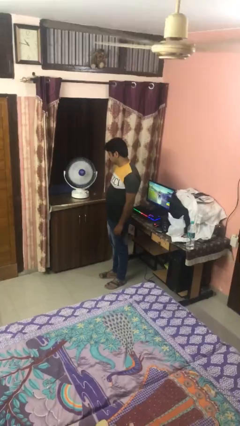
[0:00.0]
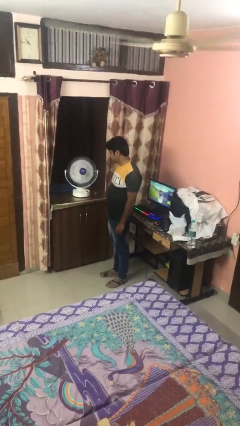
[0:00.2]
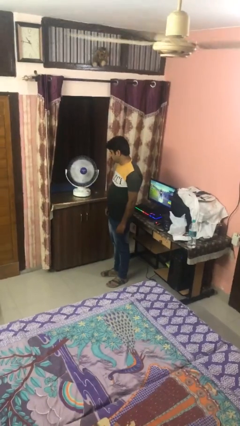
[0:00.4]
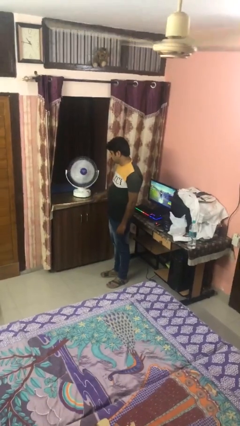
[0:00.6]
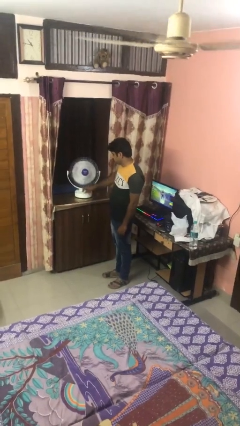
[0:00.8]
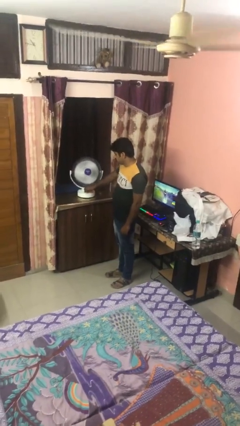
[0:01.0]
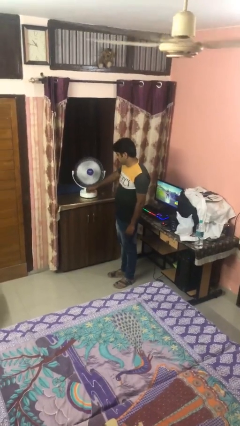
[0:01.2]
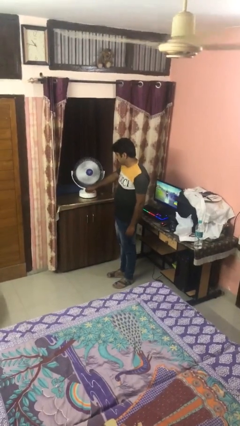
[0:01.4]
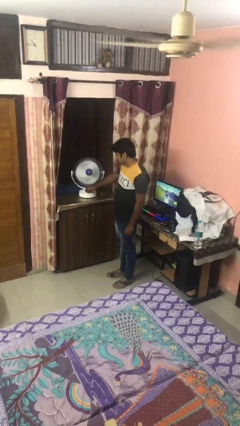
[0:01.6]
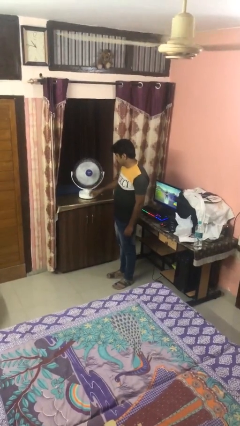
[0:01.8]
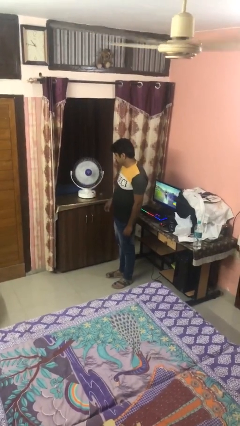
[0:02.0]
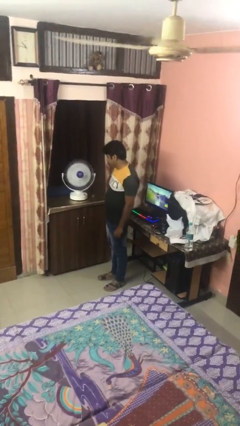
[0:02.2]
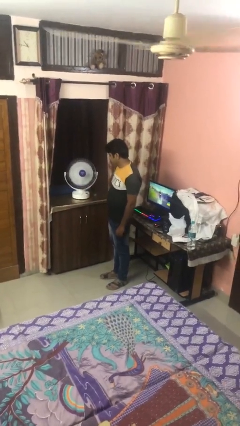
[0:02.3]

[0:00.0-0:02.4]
person turns on fan

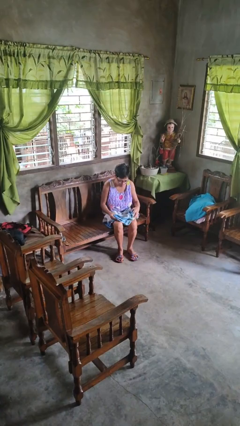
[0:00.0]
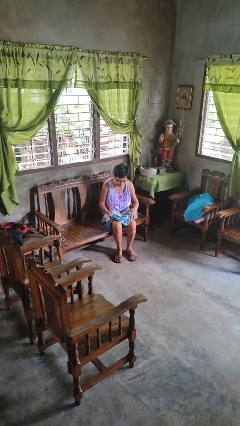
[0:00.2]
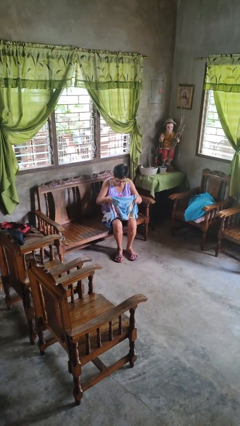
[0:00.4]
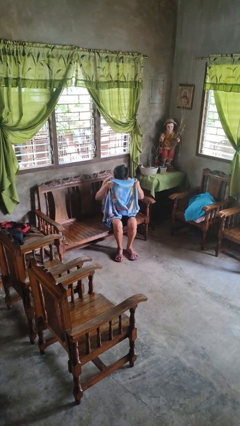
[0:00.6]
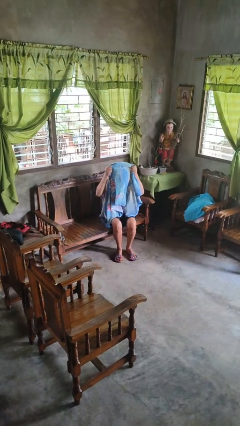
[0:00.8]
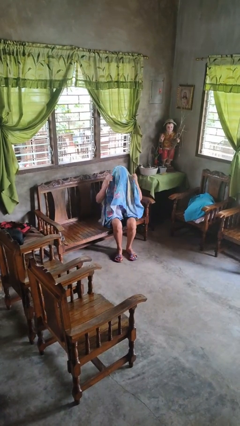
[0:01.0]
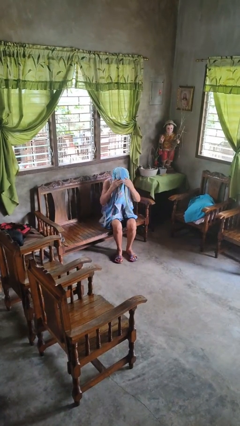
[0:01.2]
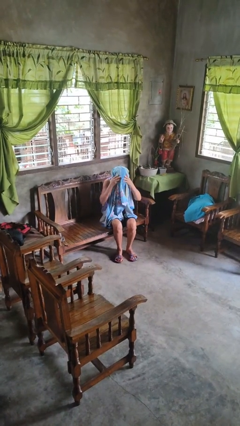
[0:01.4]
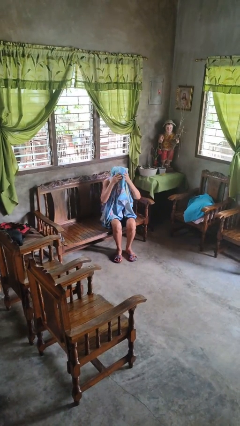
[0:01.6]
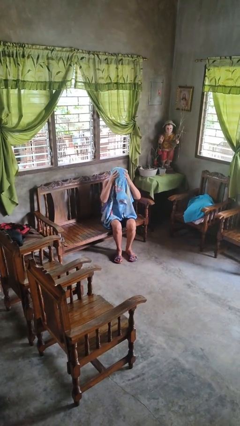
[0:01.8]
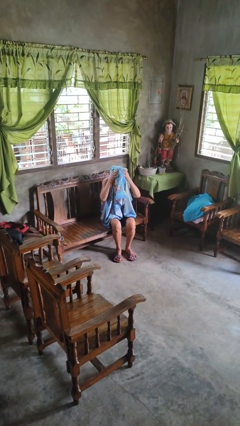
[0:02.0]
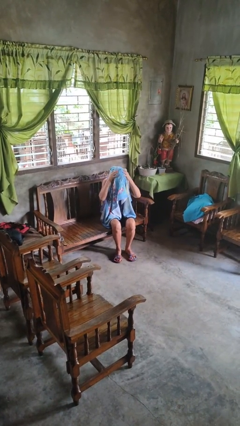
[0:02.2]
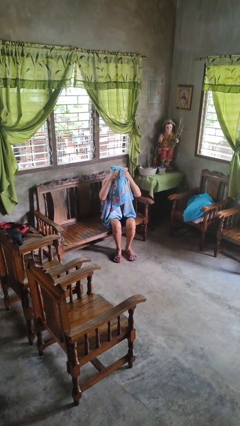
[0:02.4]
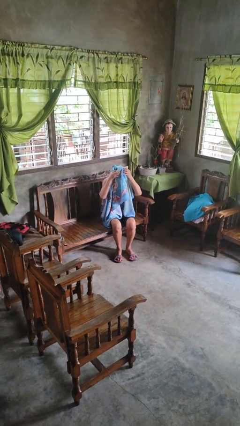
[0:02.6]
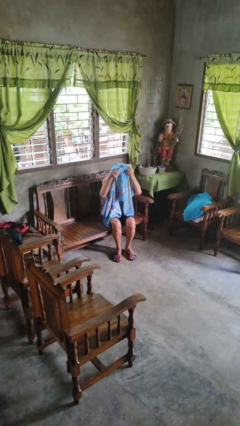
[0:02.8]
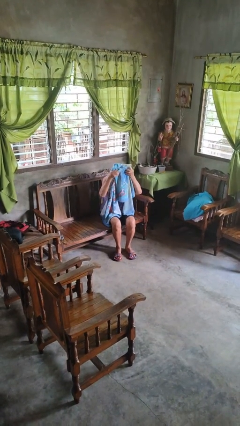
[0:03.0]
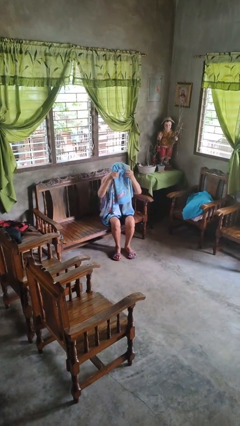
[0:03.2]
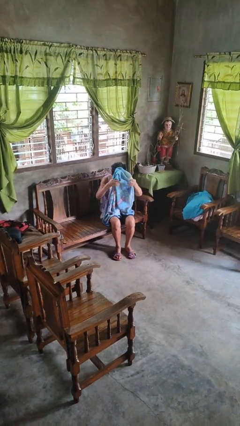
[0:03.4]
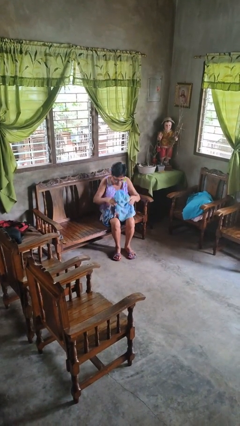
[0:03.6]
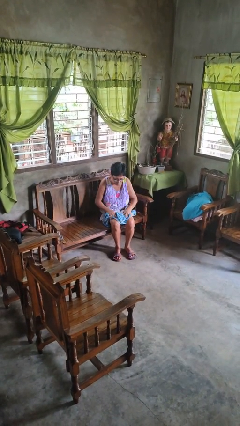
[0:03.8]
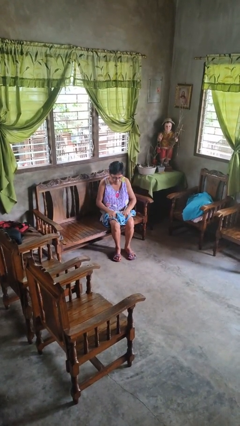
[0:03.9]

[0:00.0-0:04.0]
person dries hair with towel

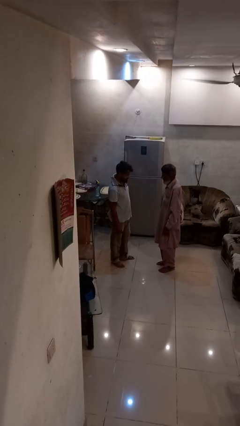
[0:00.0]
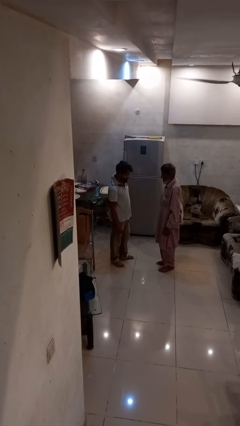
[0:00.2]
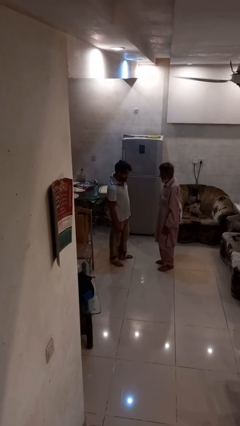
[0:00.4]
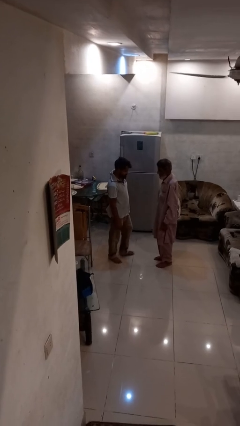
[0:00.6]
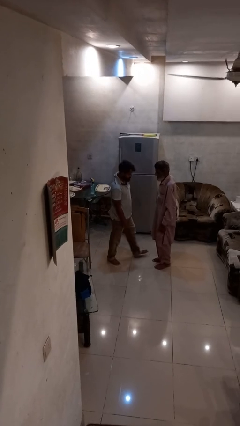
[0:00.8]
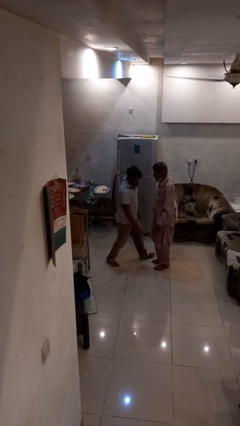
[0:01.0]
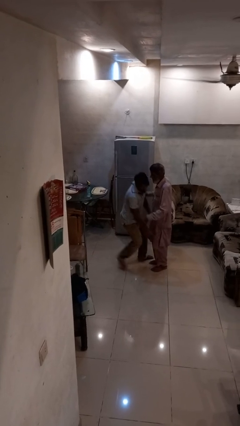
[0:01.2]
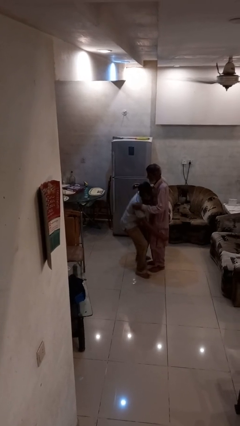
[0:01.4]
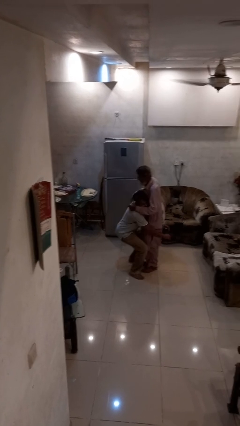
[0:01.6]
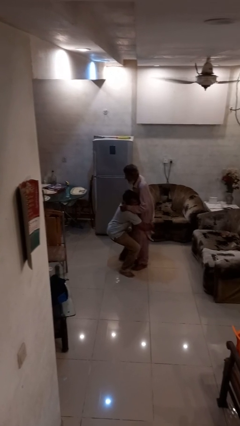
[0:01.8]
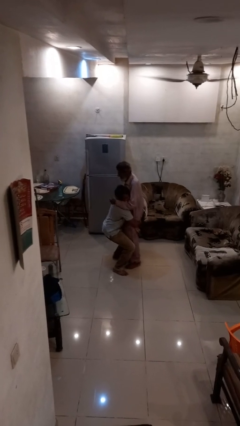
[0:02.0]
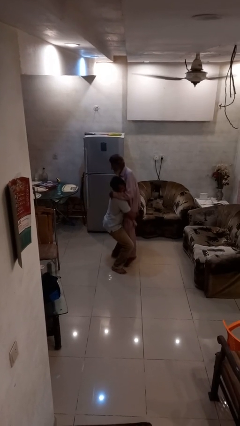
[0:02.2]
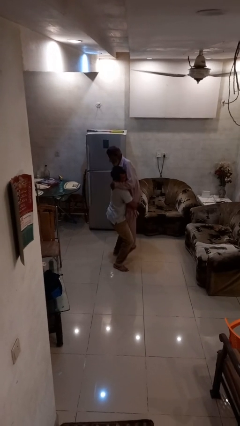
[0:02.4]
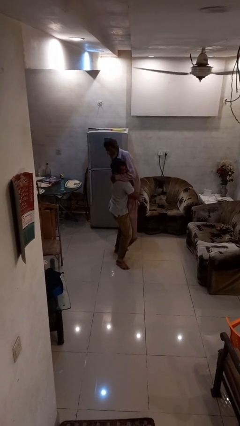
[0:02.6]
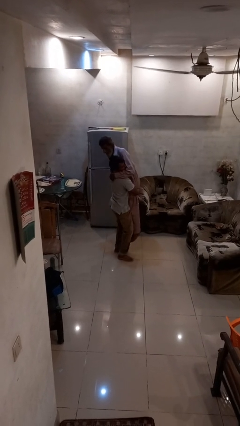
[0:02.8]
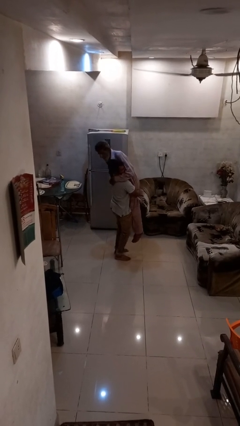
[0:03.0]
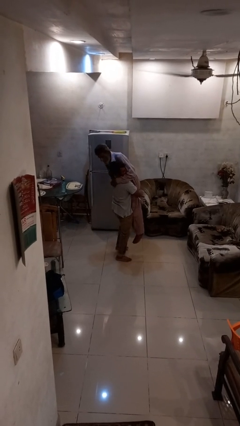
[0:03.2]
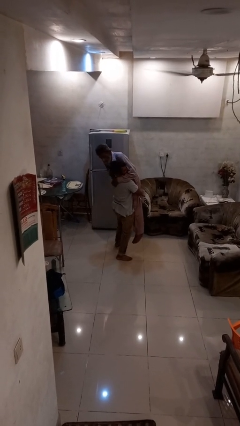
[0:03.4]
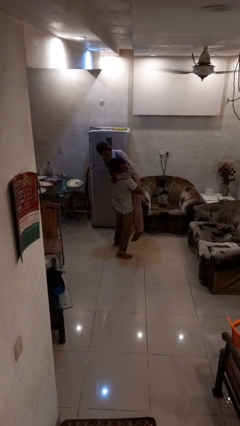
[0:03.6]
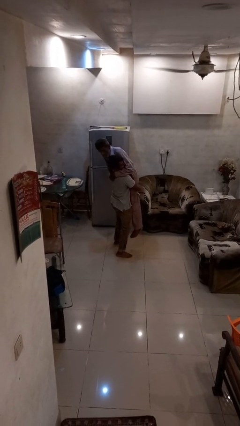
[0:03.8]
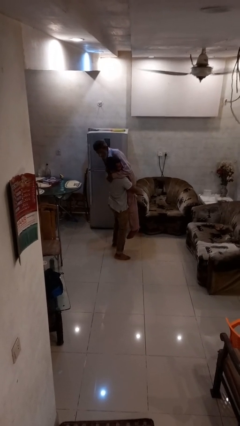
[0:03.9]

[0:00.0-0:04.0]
person picks up person

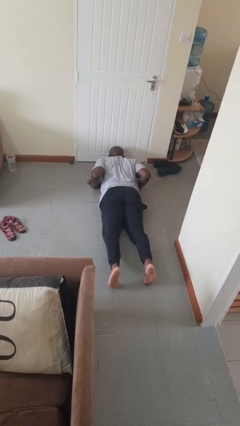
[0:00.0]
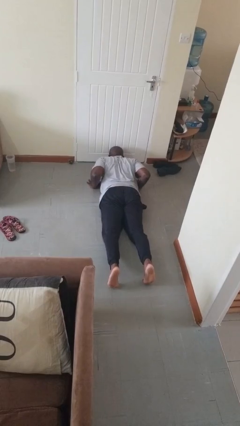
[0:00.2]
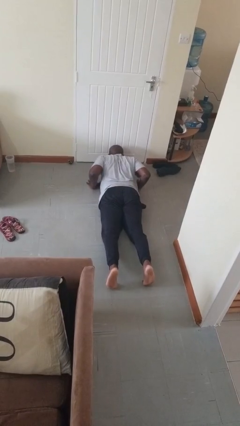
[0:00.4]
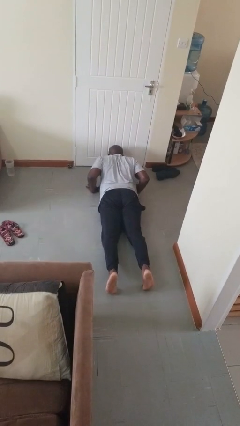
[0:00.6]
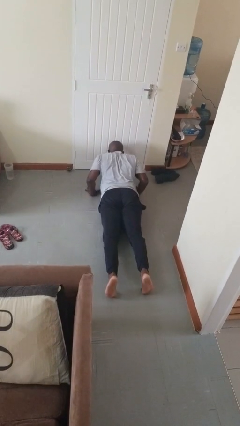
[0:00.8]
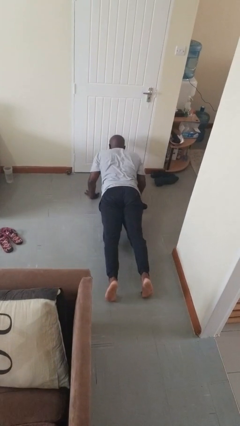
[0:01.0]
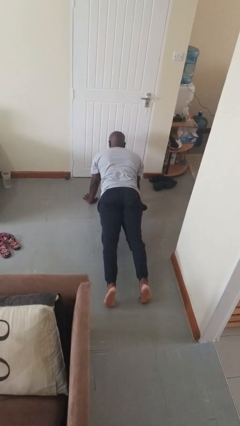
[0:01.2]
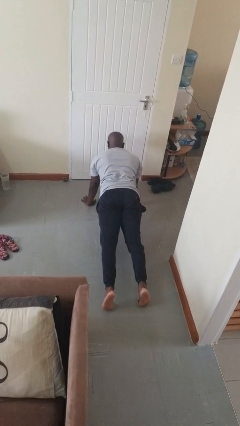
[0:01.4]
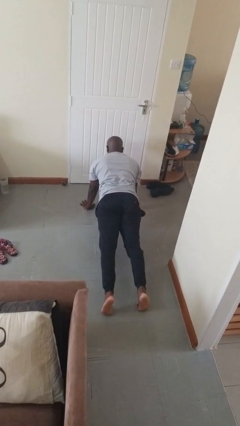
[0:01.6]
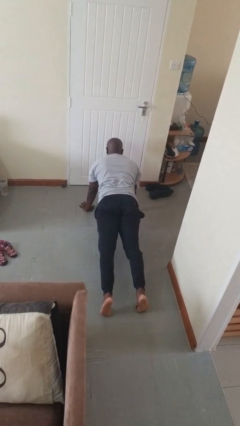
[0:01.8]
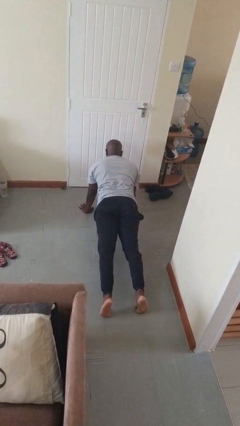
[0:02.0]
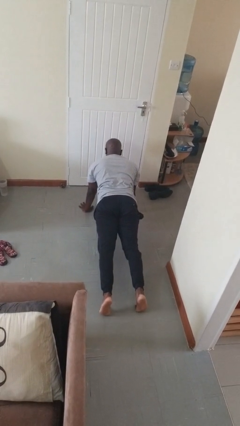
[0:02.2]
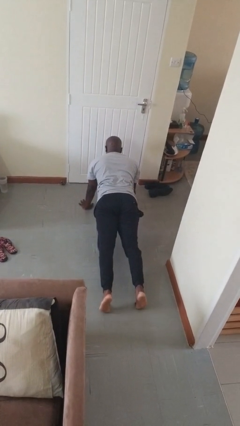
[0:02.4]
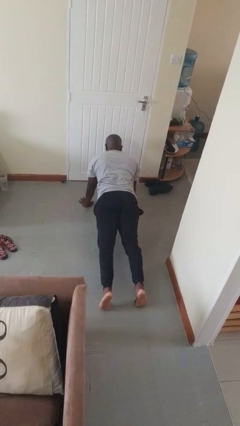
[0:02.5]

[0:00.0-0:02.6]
person exercises with pushup

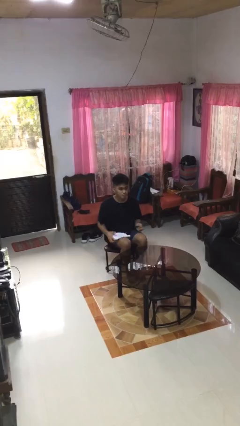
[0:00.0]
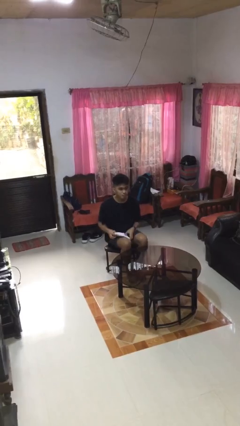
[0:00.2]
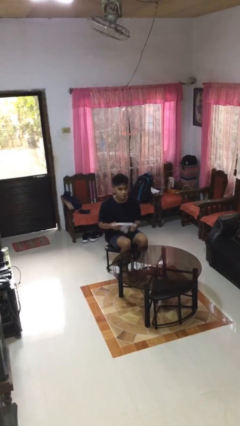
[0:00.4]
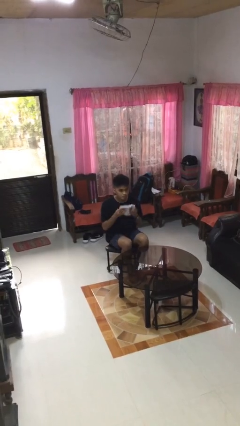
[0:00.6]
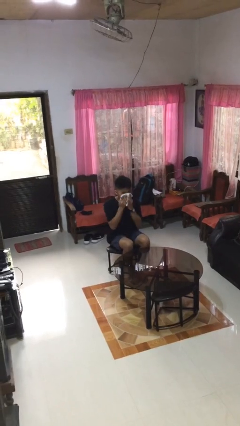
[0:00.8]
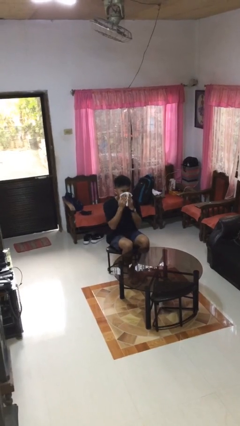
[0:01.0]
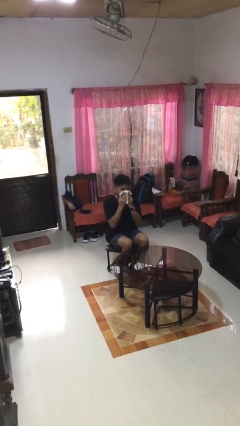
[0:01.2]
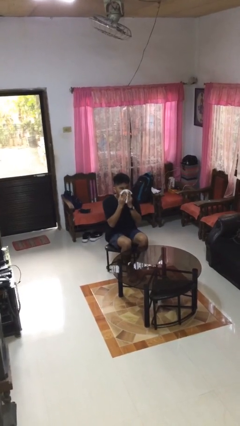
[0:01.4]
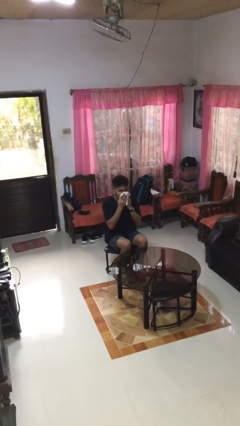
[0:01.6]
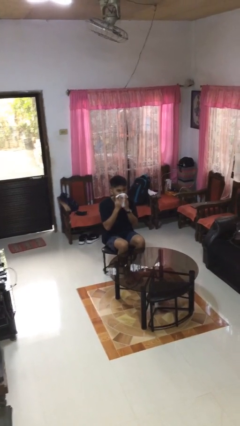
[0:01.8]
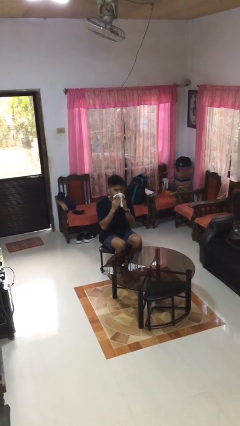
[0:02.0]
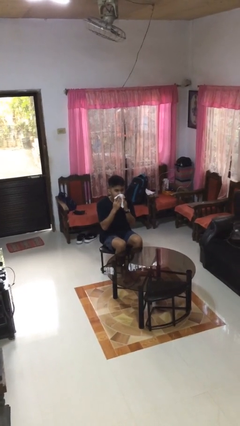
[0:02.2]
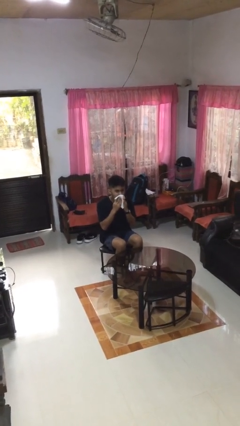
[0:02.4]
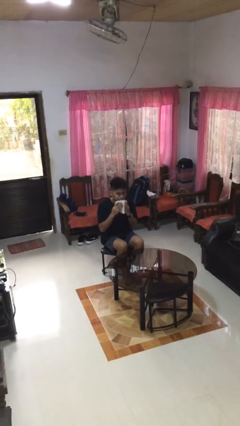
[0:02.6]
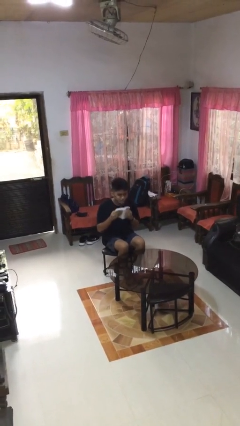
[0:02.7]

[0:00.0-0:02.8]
person wipes mouth with napkin

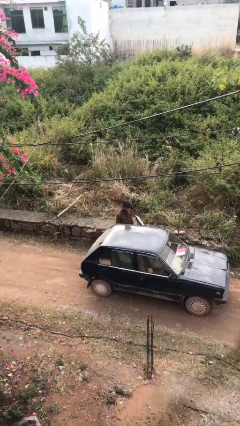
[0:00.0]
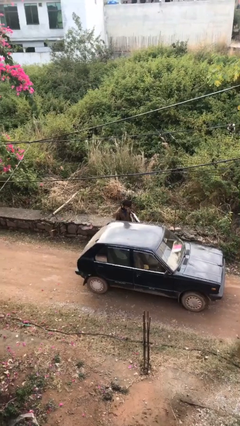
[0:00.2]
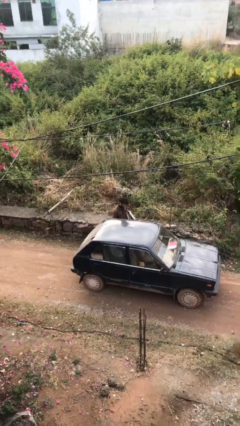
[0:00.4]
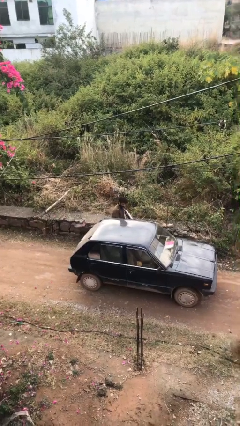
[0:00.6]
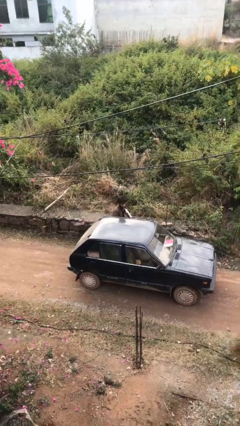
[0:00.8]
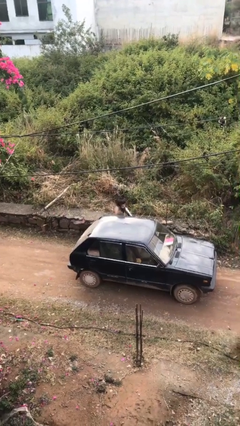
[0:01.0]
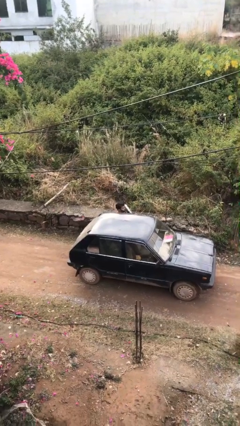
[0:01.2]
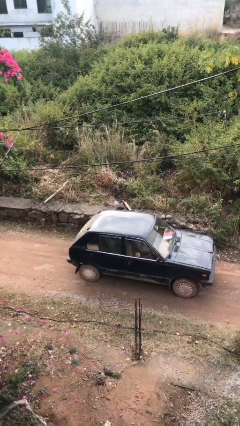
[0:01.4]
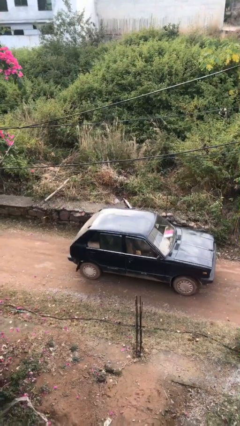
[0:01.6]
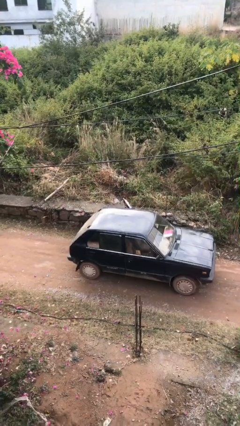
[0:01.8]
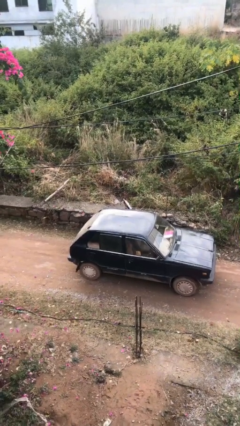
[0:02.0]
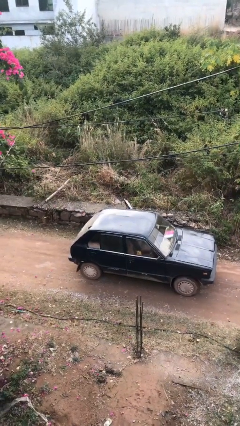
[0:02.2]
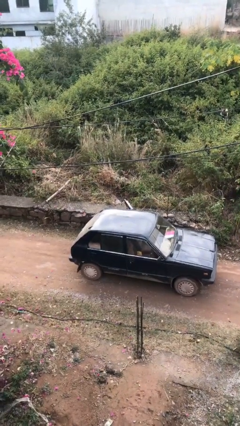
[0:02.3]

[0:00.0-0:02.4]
person enters car
